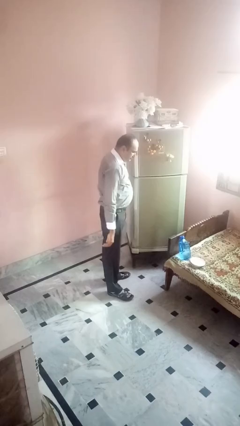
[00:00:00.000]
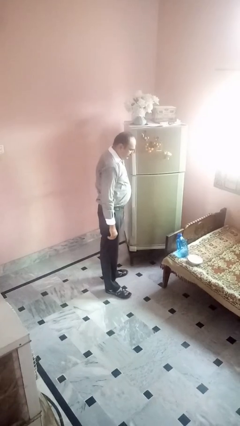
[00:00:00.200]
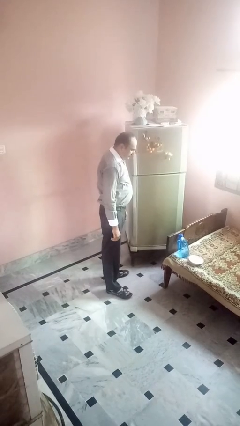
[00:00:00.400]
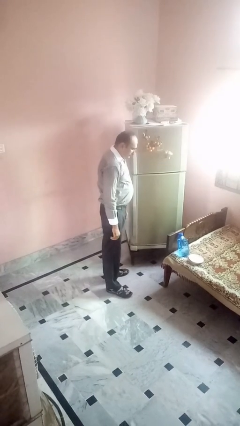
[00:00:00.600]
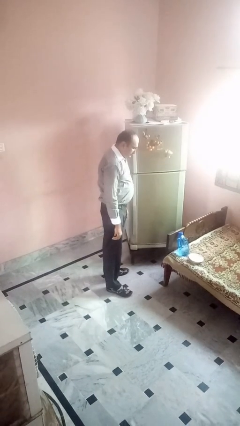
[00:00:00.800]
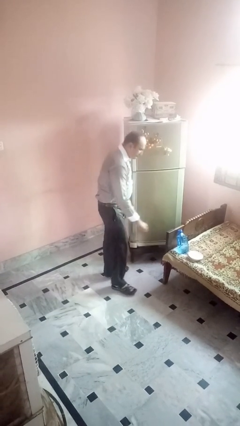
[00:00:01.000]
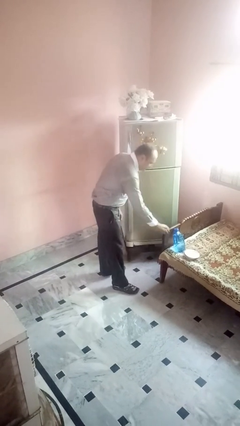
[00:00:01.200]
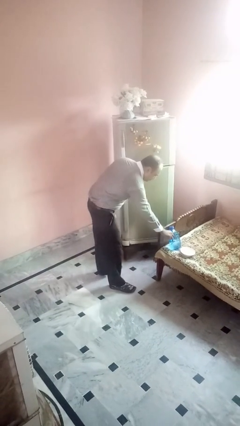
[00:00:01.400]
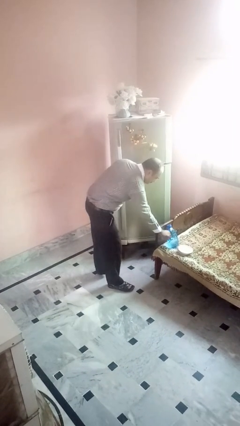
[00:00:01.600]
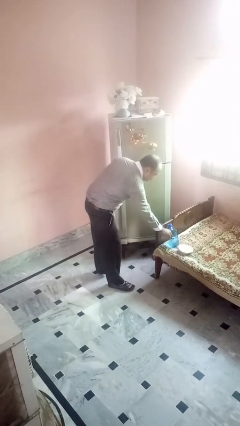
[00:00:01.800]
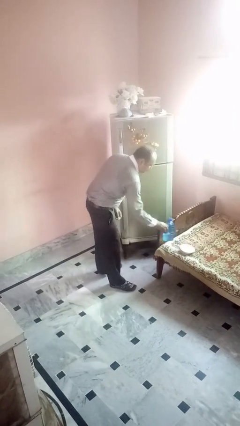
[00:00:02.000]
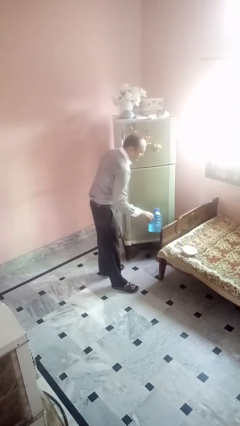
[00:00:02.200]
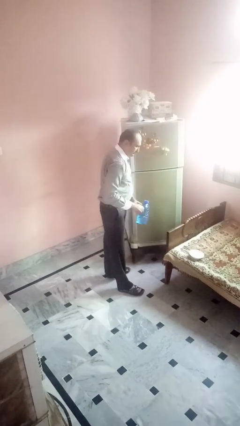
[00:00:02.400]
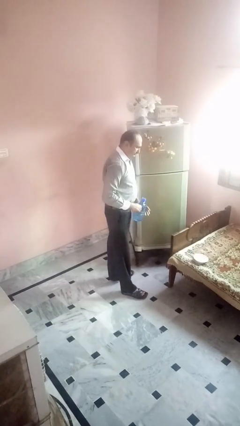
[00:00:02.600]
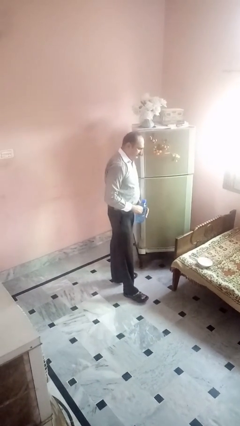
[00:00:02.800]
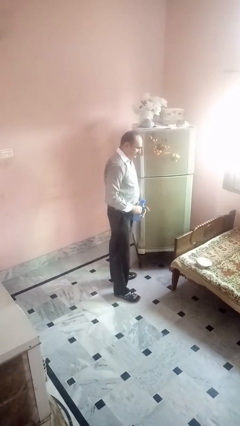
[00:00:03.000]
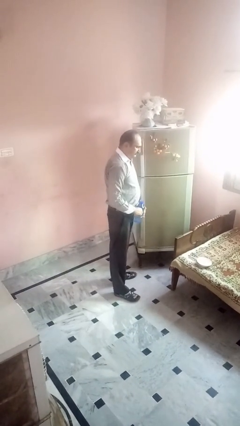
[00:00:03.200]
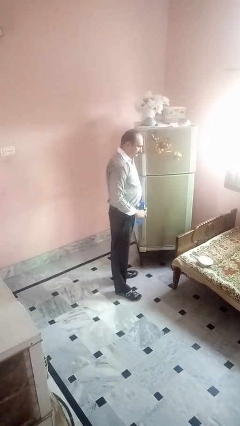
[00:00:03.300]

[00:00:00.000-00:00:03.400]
person takes object from refrigerator

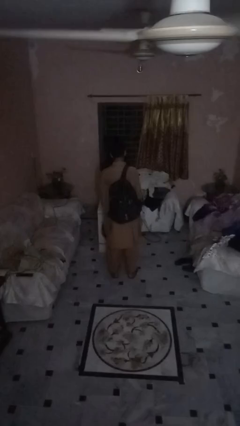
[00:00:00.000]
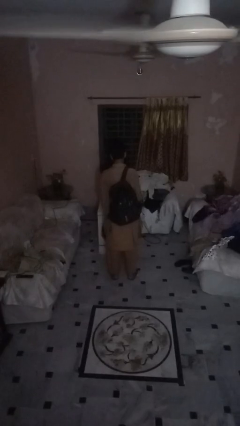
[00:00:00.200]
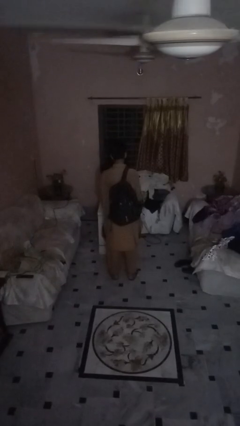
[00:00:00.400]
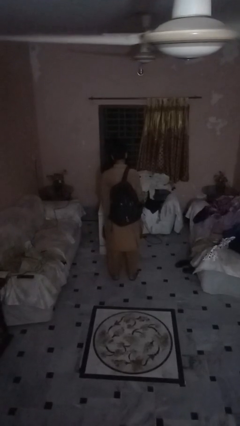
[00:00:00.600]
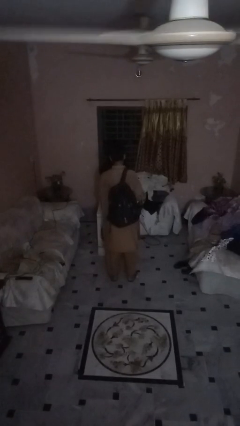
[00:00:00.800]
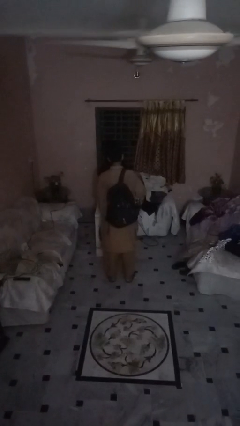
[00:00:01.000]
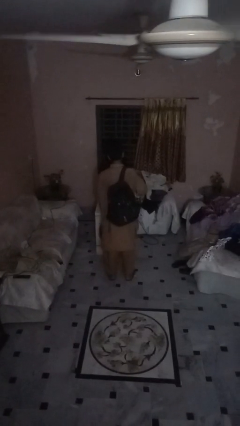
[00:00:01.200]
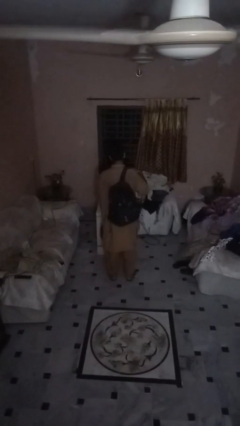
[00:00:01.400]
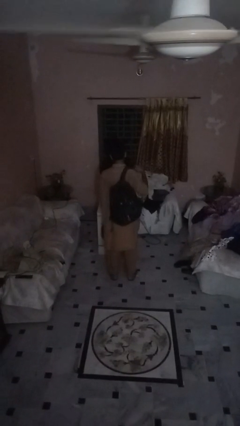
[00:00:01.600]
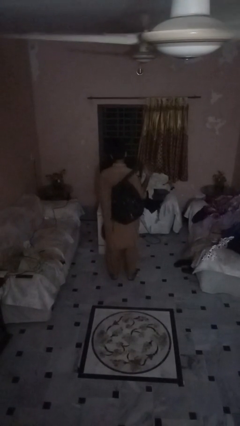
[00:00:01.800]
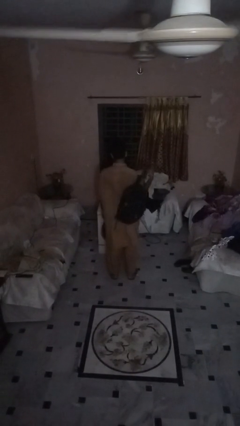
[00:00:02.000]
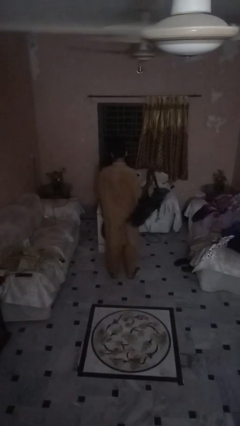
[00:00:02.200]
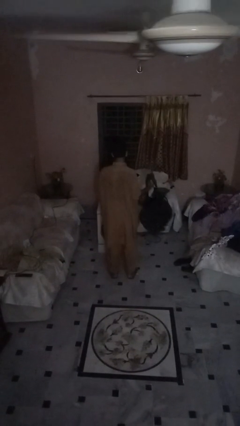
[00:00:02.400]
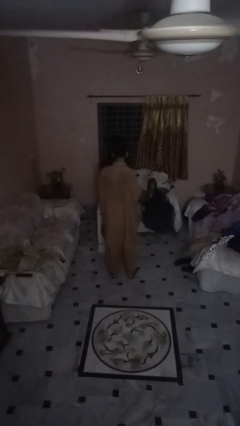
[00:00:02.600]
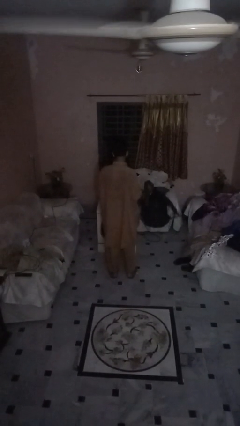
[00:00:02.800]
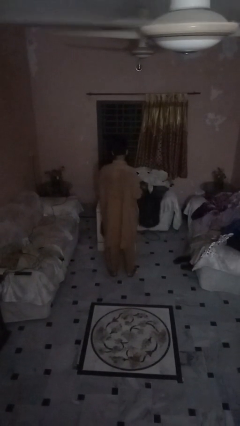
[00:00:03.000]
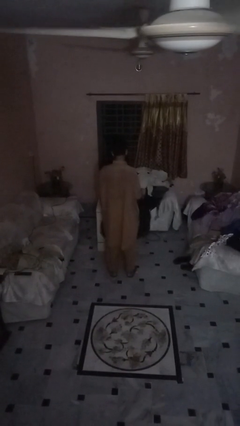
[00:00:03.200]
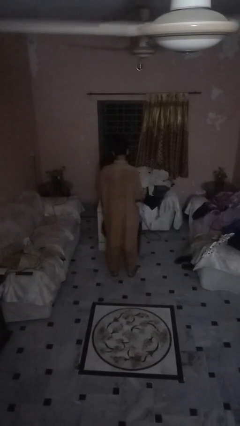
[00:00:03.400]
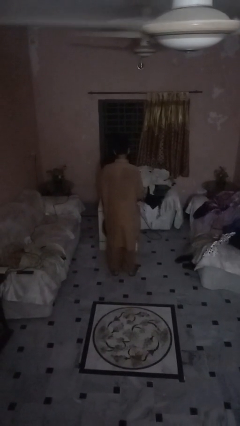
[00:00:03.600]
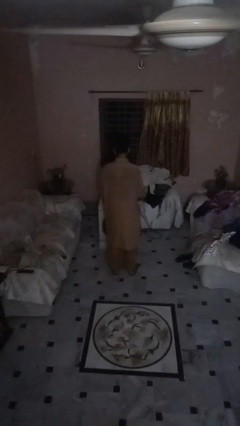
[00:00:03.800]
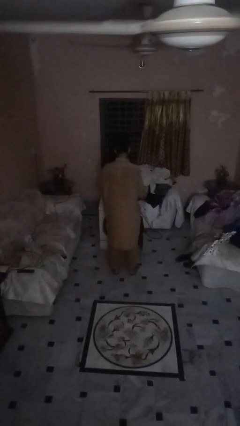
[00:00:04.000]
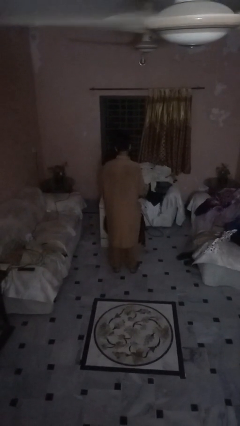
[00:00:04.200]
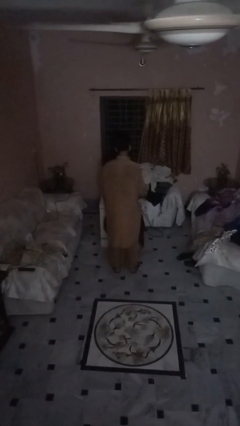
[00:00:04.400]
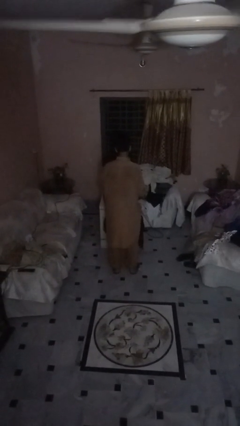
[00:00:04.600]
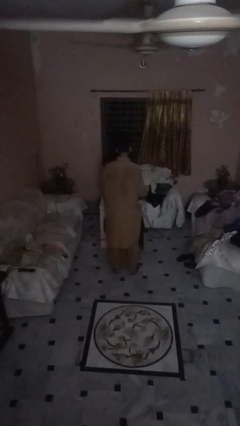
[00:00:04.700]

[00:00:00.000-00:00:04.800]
person takes off backpack

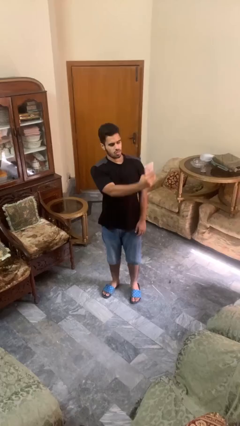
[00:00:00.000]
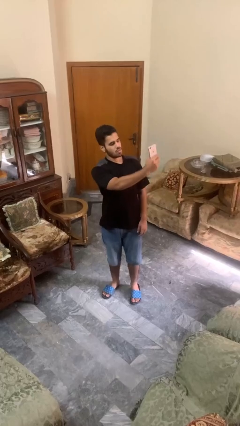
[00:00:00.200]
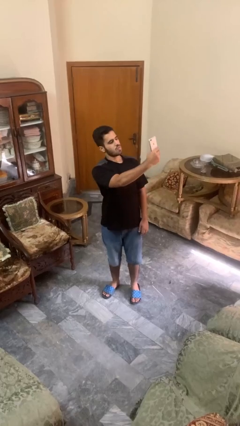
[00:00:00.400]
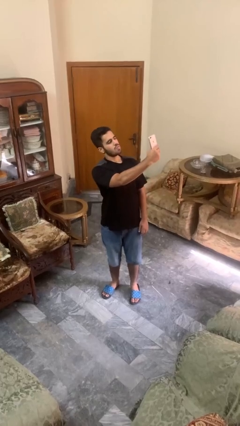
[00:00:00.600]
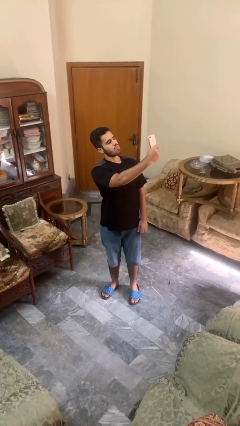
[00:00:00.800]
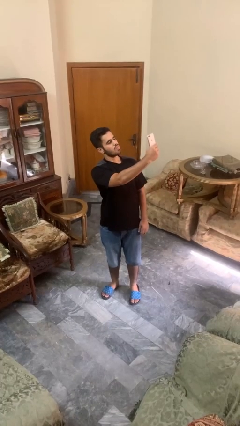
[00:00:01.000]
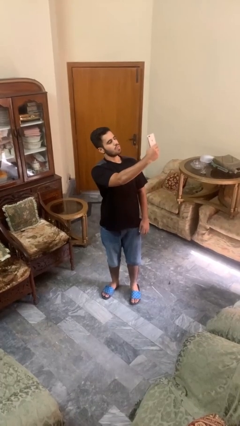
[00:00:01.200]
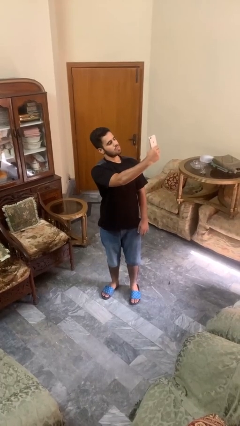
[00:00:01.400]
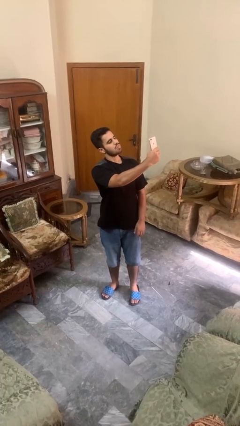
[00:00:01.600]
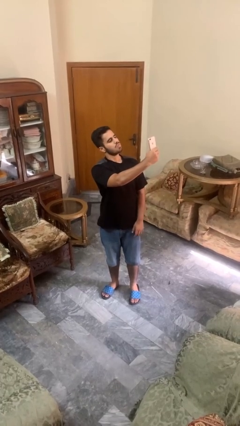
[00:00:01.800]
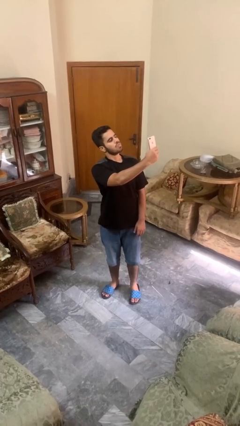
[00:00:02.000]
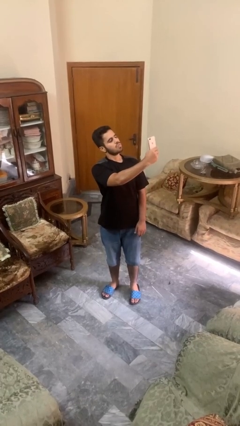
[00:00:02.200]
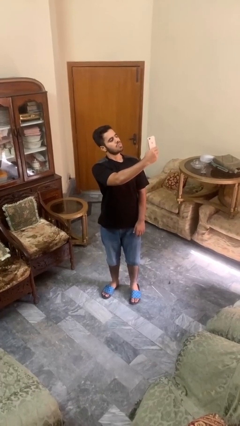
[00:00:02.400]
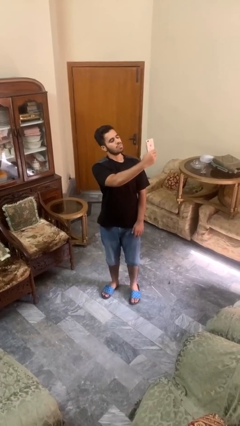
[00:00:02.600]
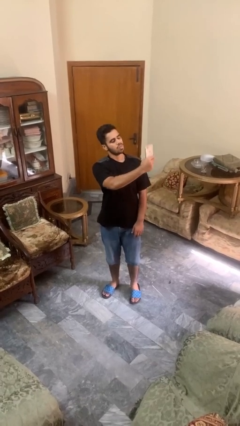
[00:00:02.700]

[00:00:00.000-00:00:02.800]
person takes selfie

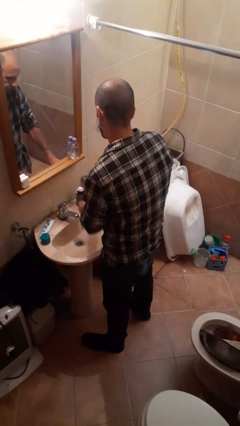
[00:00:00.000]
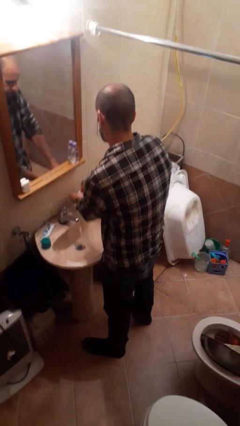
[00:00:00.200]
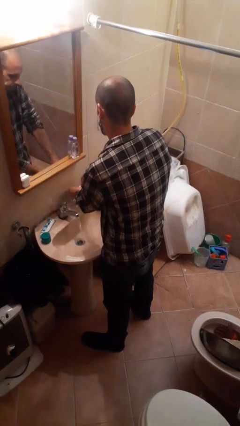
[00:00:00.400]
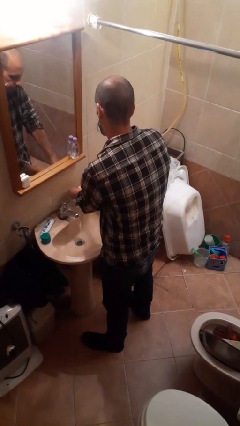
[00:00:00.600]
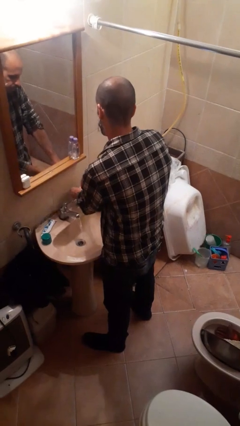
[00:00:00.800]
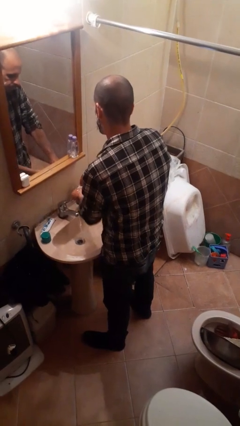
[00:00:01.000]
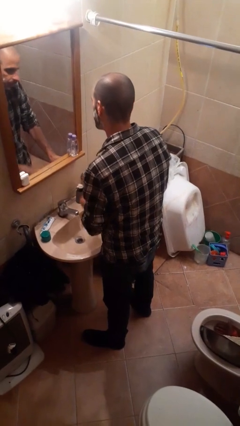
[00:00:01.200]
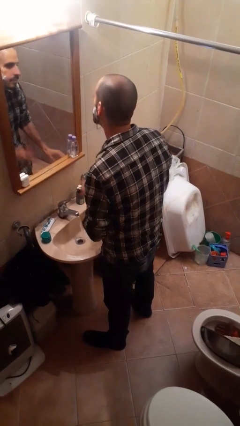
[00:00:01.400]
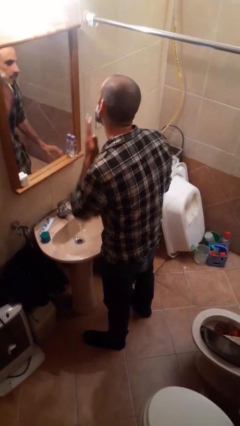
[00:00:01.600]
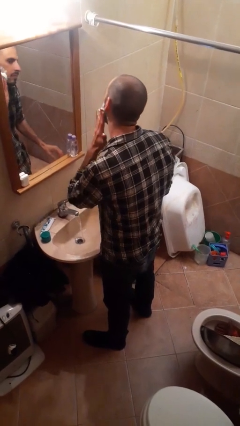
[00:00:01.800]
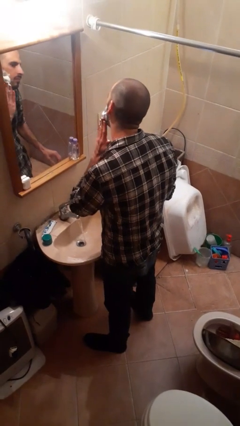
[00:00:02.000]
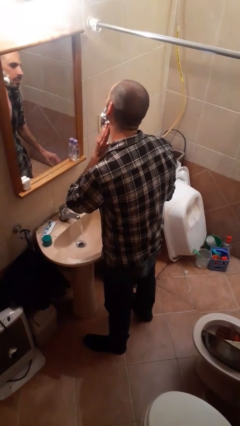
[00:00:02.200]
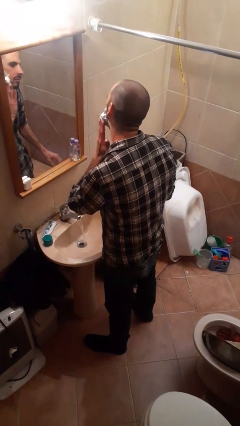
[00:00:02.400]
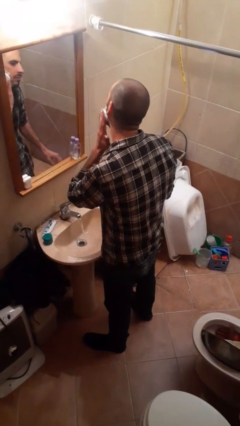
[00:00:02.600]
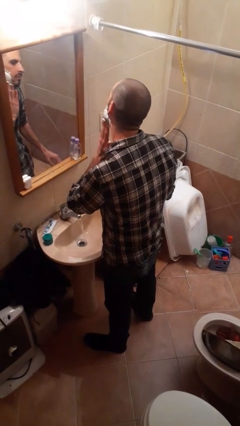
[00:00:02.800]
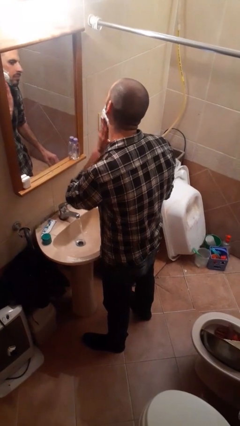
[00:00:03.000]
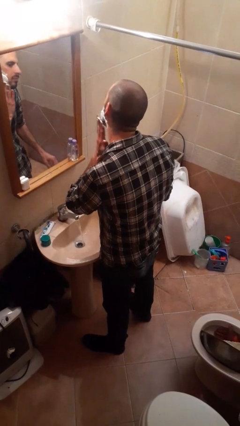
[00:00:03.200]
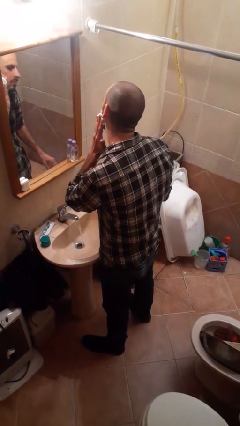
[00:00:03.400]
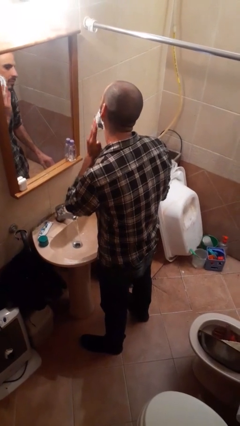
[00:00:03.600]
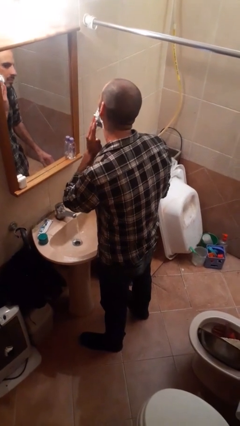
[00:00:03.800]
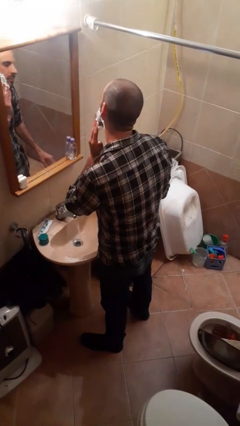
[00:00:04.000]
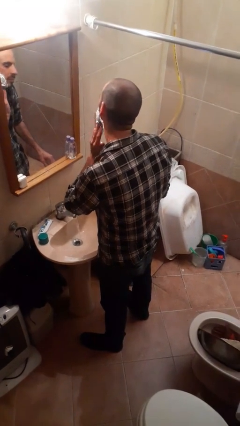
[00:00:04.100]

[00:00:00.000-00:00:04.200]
person applies shaving cream

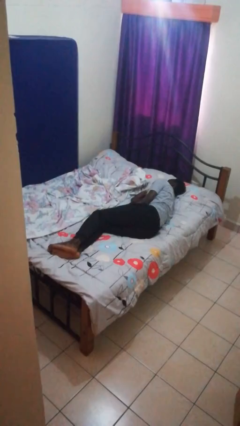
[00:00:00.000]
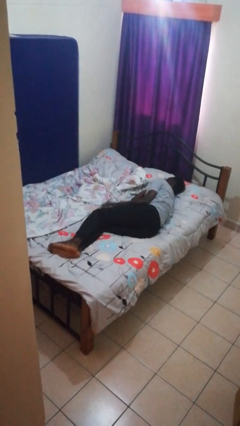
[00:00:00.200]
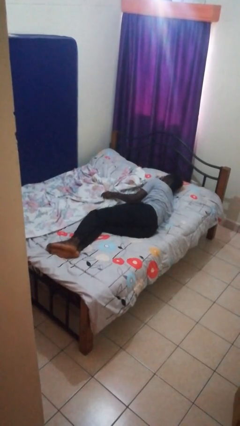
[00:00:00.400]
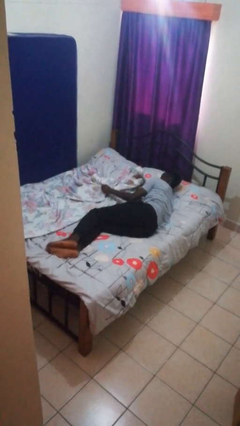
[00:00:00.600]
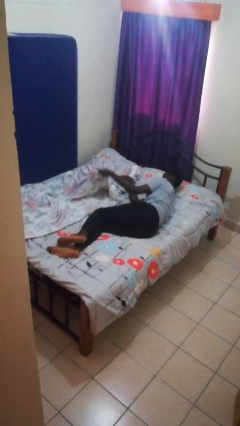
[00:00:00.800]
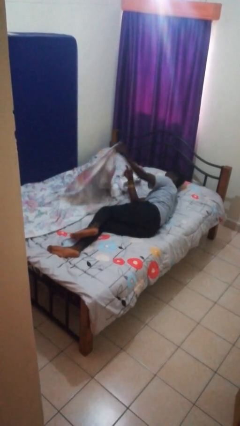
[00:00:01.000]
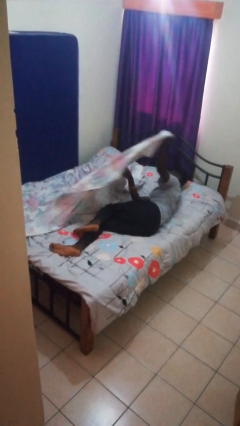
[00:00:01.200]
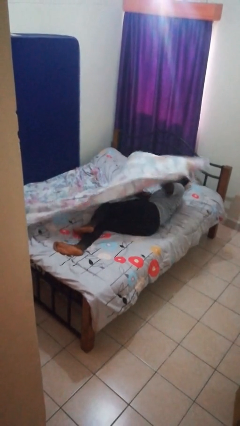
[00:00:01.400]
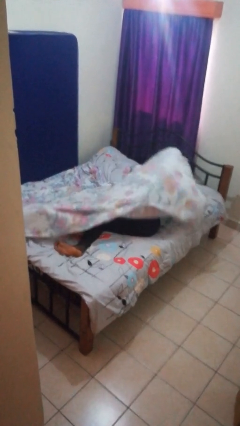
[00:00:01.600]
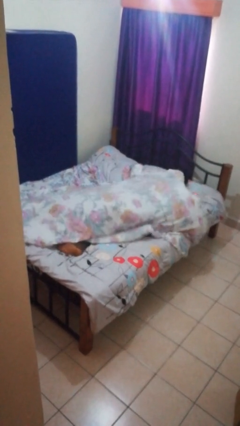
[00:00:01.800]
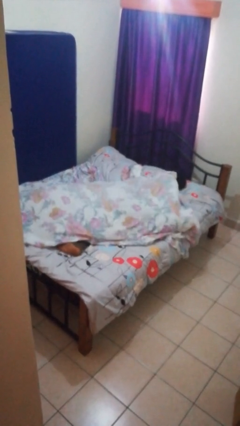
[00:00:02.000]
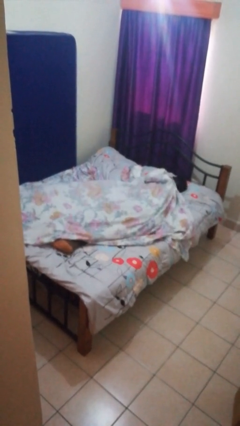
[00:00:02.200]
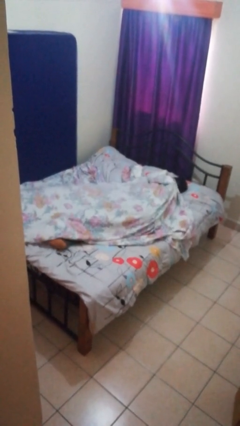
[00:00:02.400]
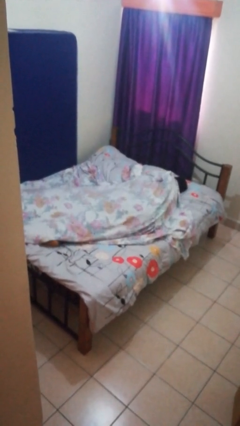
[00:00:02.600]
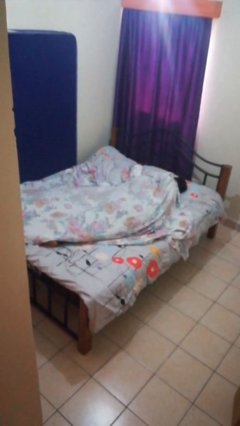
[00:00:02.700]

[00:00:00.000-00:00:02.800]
person covers with bedsheets
